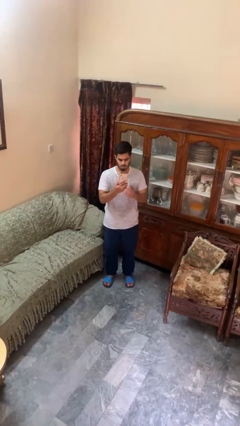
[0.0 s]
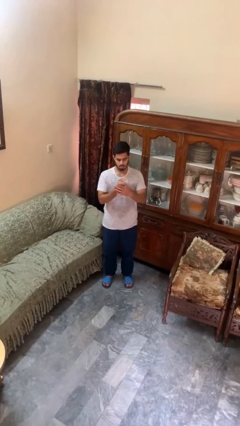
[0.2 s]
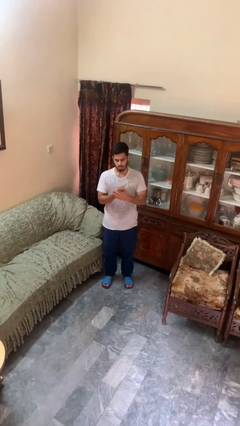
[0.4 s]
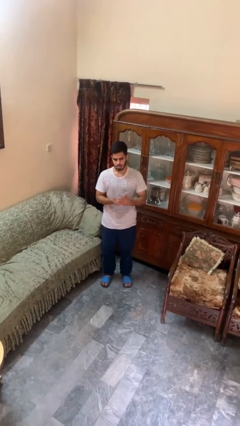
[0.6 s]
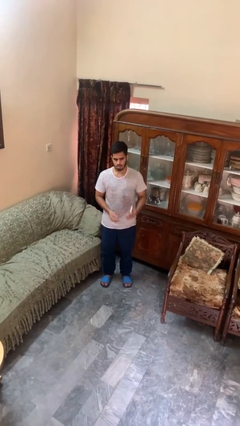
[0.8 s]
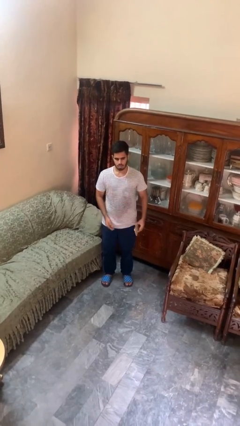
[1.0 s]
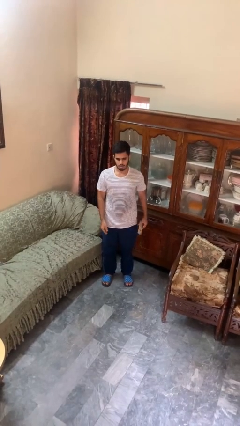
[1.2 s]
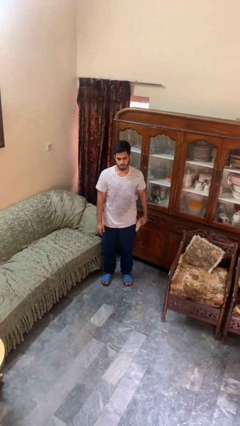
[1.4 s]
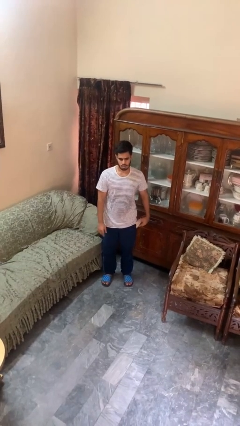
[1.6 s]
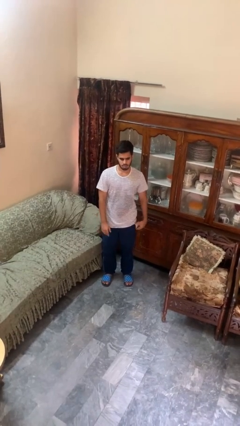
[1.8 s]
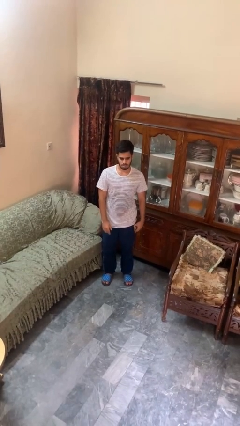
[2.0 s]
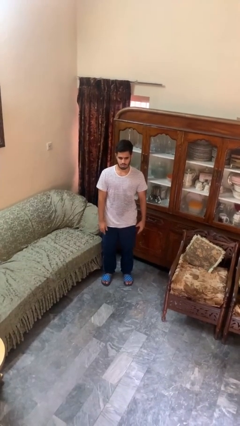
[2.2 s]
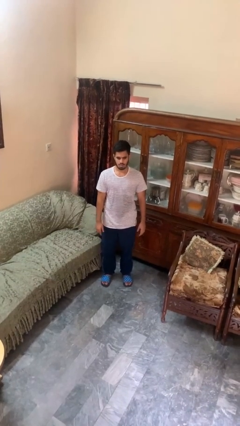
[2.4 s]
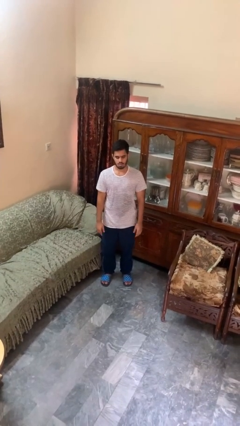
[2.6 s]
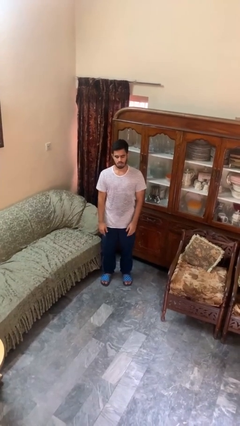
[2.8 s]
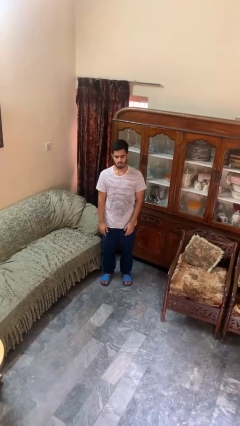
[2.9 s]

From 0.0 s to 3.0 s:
person puts phone into pocket

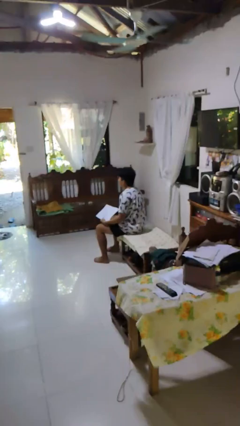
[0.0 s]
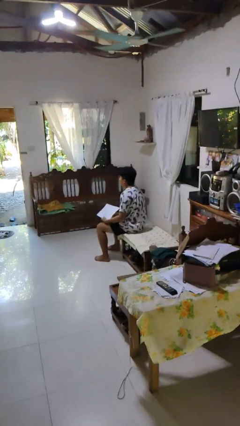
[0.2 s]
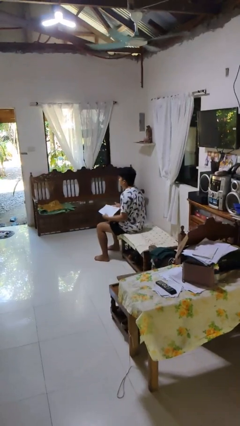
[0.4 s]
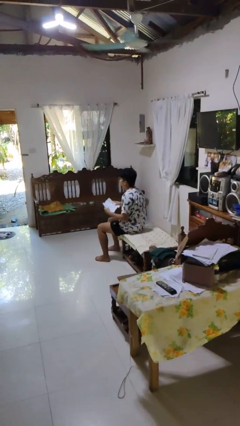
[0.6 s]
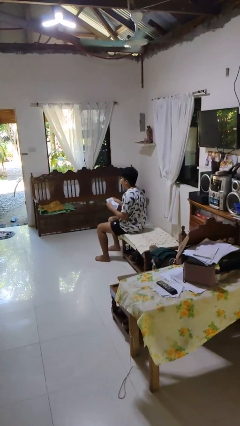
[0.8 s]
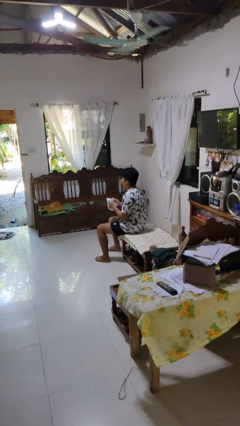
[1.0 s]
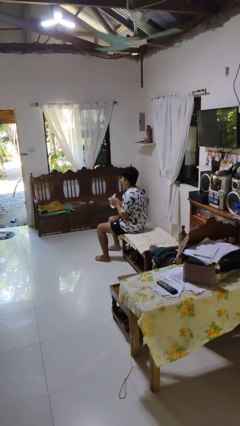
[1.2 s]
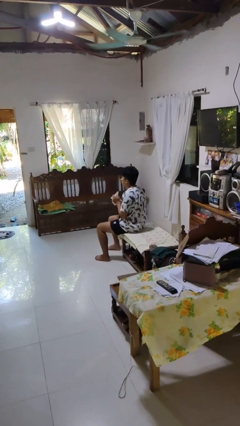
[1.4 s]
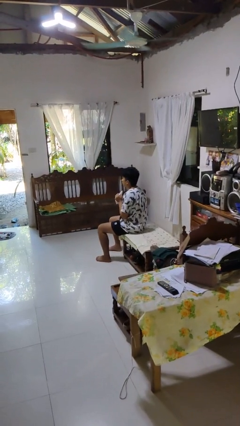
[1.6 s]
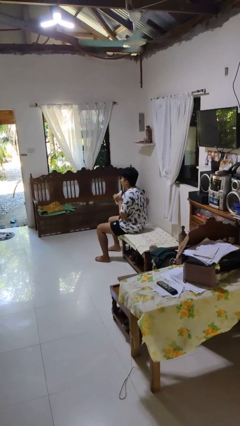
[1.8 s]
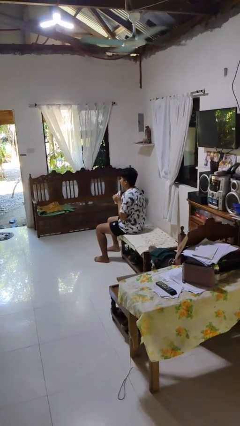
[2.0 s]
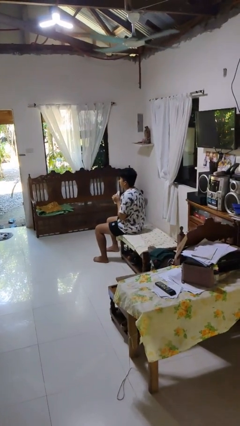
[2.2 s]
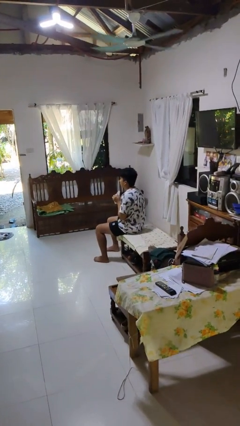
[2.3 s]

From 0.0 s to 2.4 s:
person crumples paper

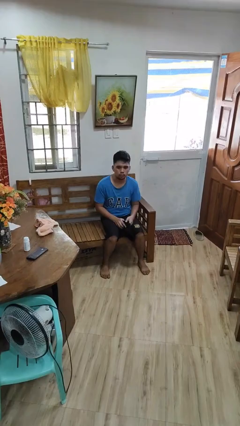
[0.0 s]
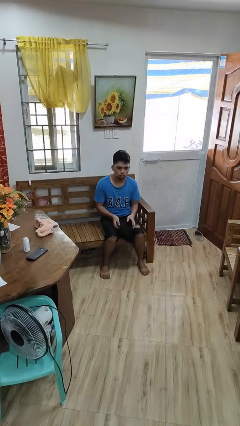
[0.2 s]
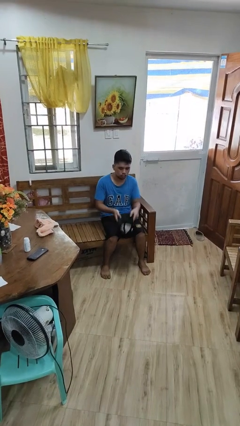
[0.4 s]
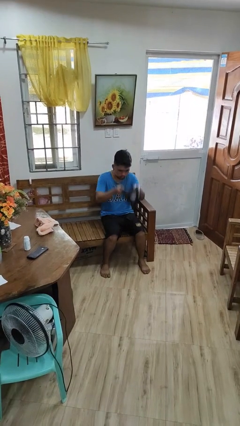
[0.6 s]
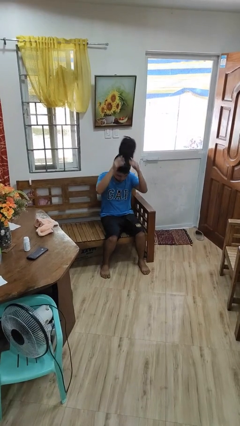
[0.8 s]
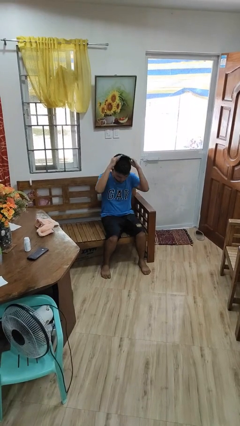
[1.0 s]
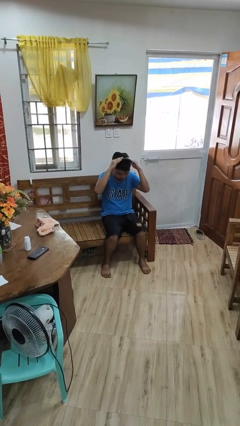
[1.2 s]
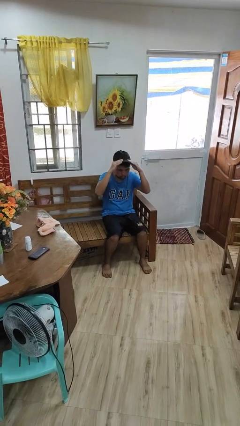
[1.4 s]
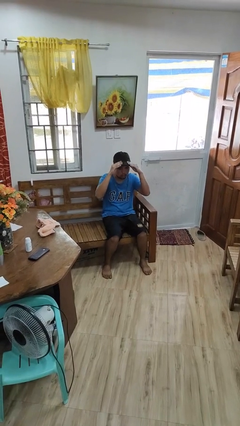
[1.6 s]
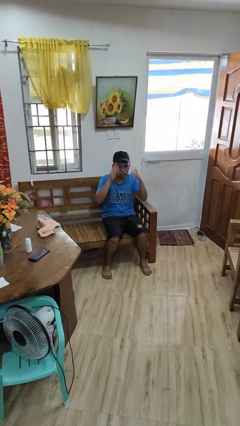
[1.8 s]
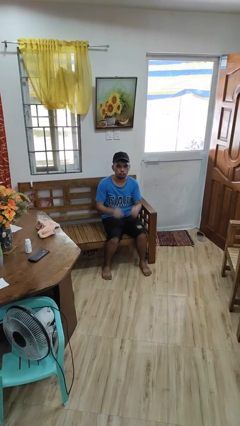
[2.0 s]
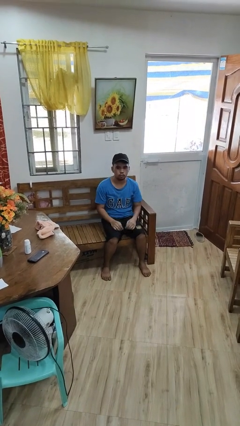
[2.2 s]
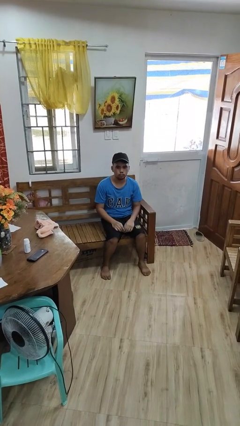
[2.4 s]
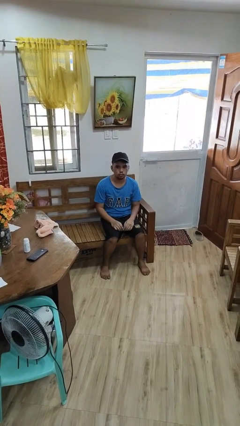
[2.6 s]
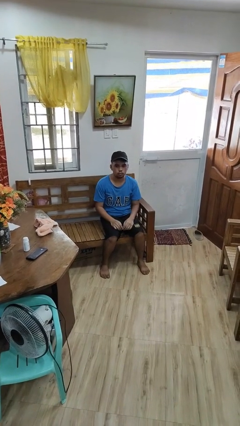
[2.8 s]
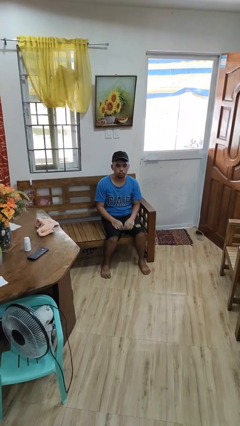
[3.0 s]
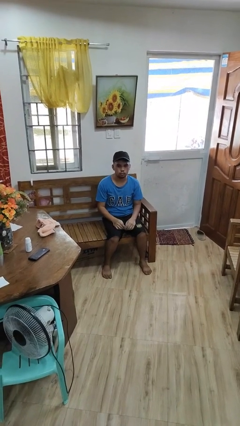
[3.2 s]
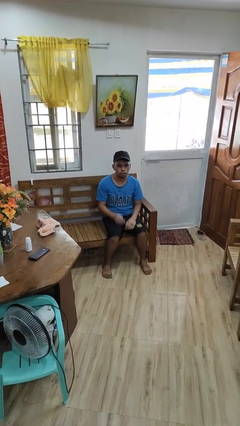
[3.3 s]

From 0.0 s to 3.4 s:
person puts on hat

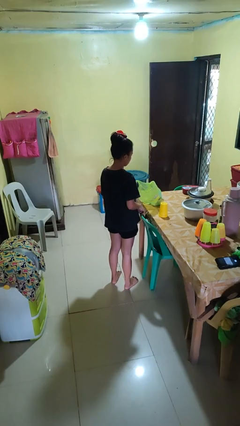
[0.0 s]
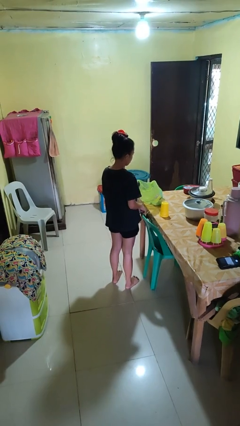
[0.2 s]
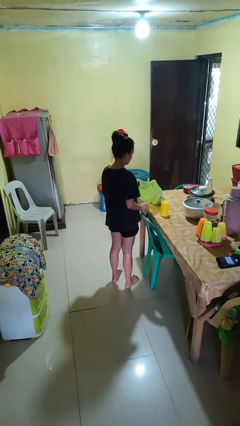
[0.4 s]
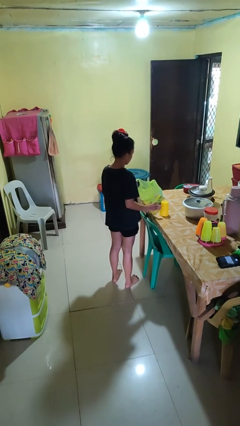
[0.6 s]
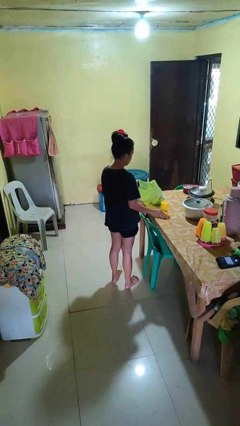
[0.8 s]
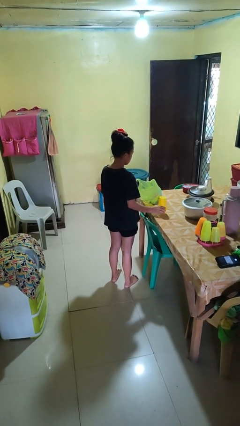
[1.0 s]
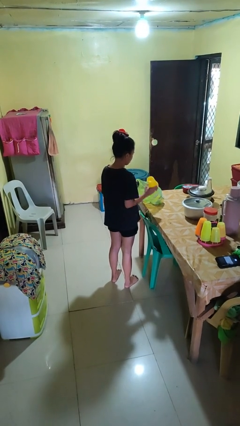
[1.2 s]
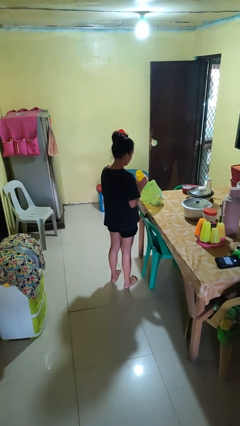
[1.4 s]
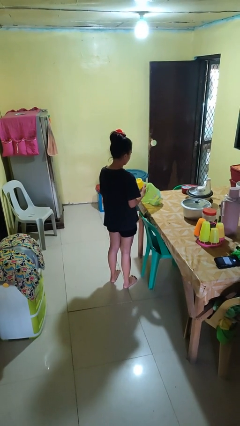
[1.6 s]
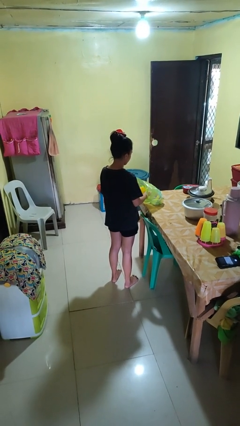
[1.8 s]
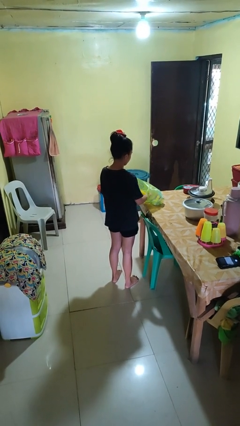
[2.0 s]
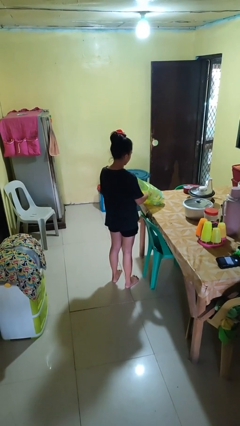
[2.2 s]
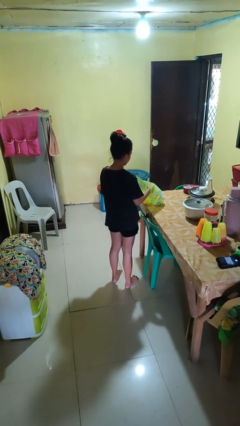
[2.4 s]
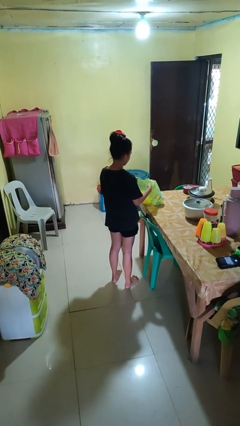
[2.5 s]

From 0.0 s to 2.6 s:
person puts object into bag

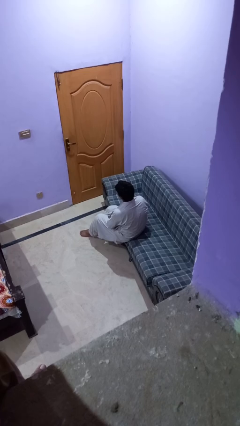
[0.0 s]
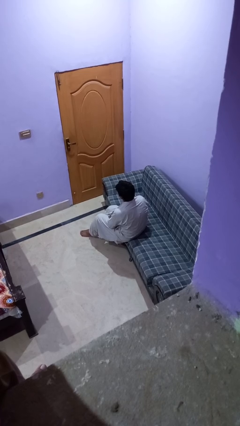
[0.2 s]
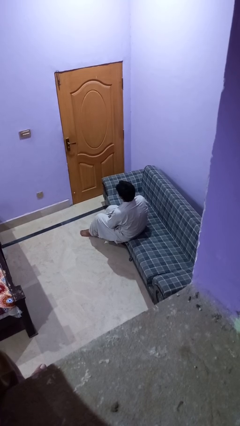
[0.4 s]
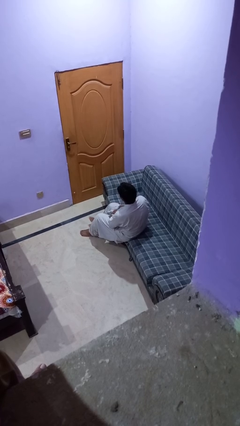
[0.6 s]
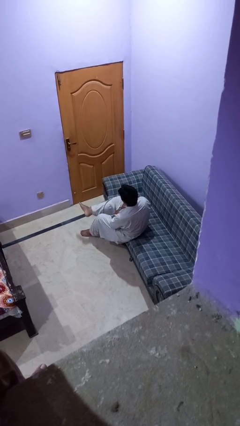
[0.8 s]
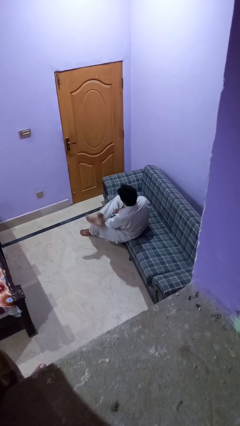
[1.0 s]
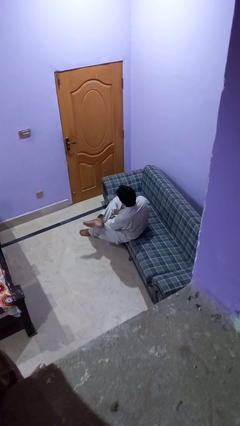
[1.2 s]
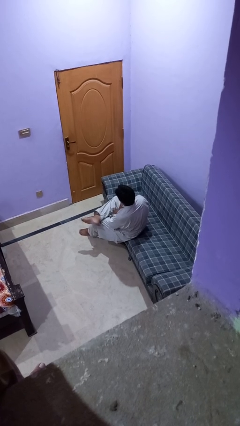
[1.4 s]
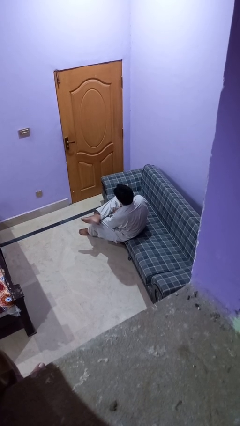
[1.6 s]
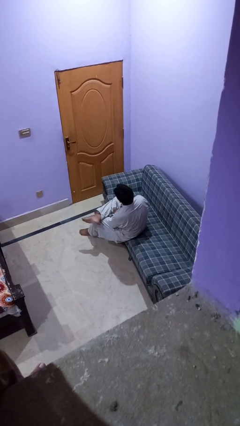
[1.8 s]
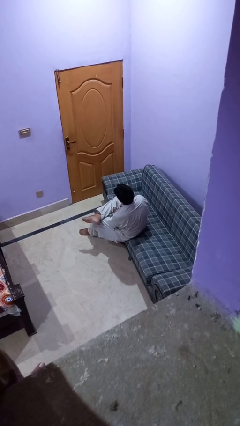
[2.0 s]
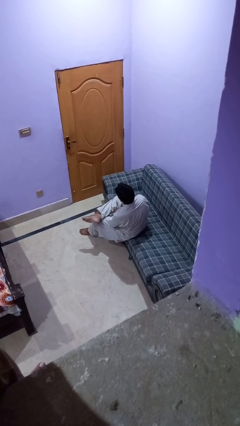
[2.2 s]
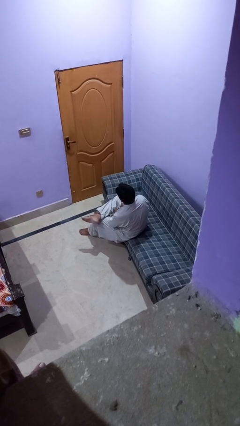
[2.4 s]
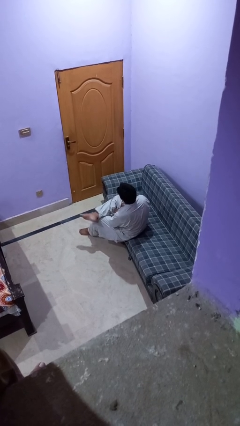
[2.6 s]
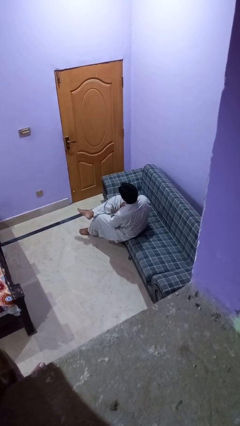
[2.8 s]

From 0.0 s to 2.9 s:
person crosses legs

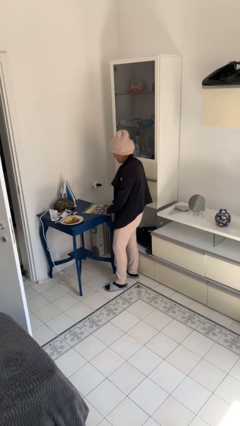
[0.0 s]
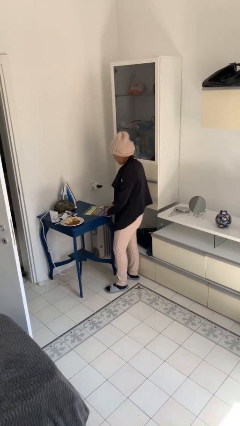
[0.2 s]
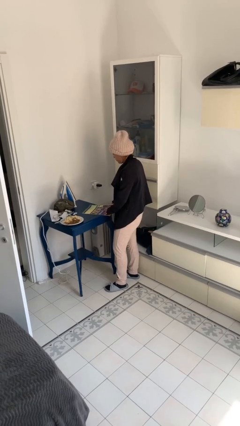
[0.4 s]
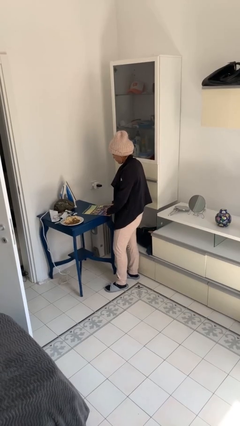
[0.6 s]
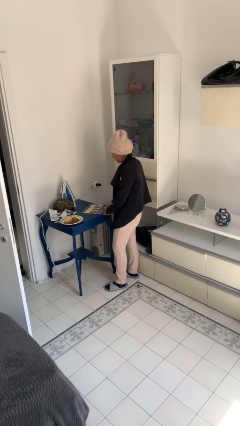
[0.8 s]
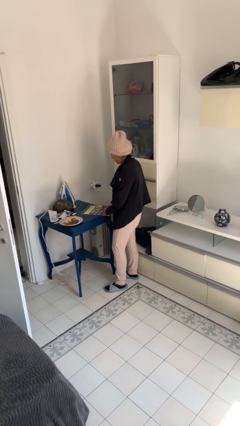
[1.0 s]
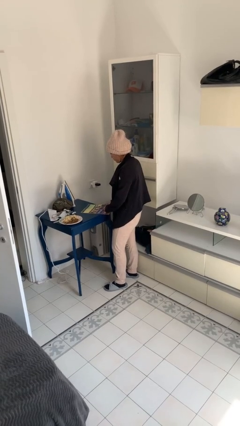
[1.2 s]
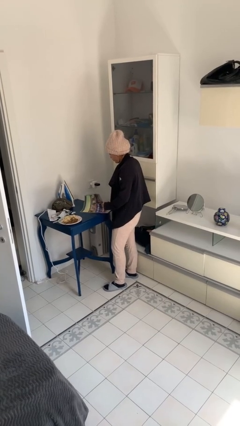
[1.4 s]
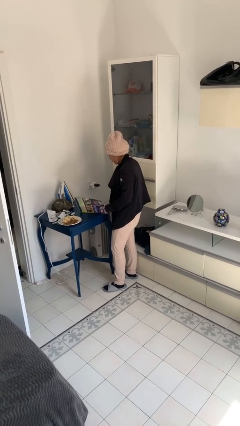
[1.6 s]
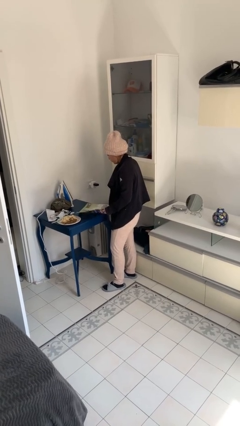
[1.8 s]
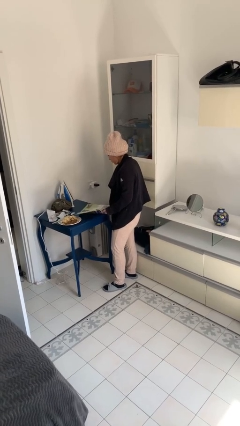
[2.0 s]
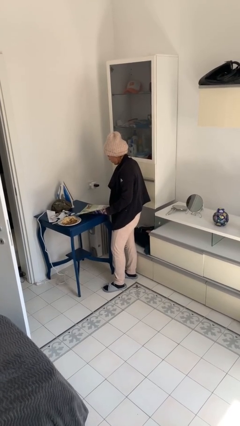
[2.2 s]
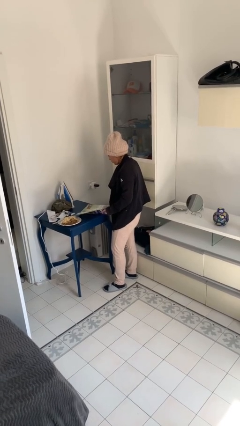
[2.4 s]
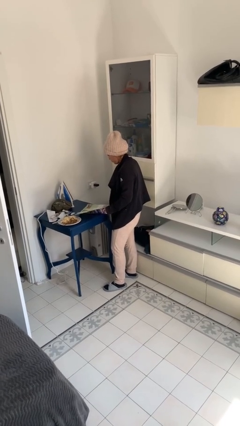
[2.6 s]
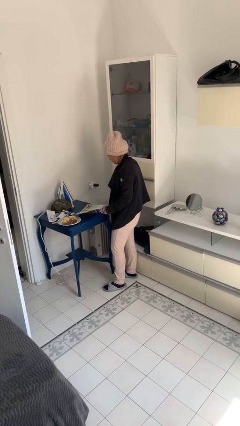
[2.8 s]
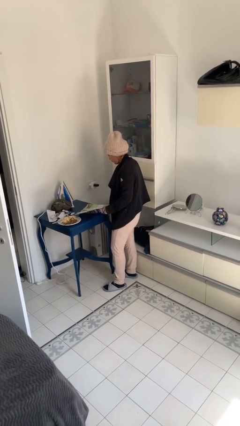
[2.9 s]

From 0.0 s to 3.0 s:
person reads magazine
